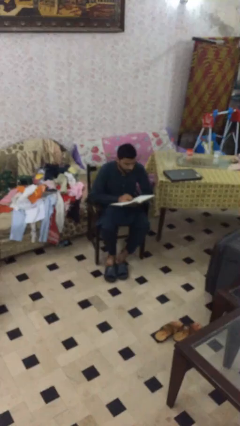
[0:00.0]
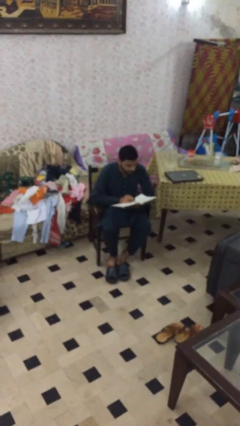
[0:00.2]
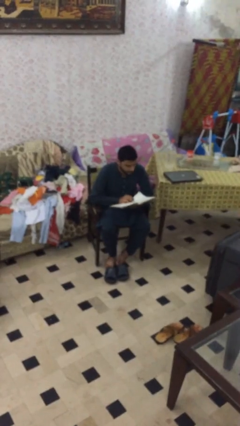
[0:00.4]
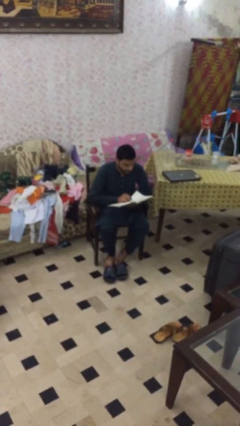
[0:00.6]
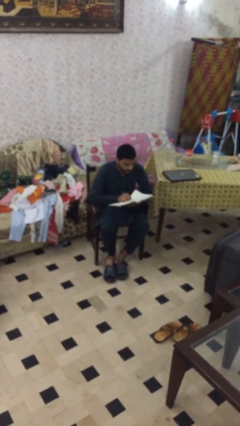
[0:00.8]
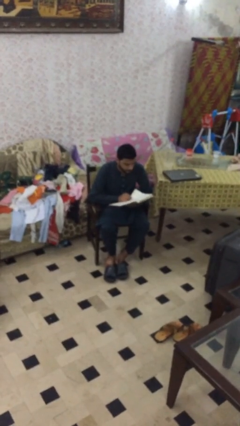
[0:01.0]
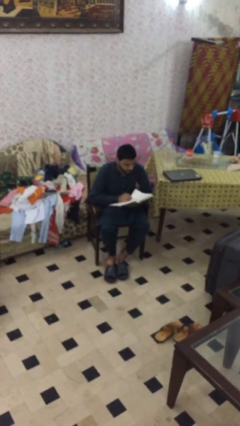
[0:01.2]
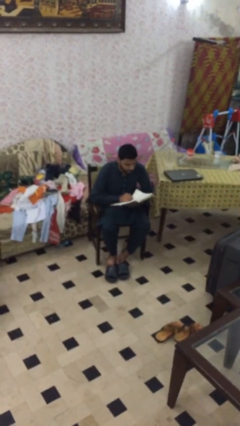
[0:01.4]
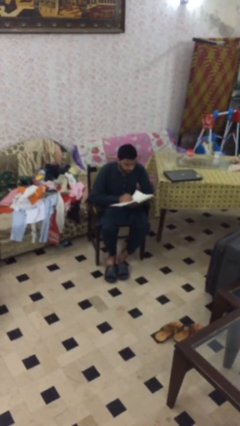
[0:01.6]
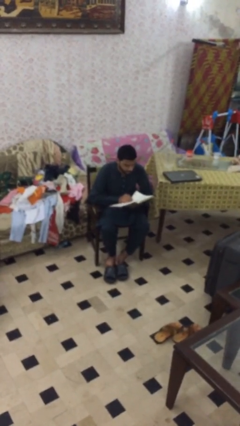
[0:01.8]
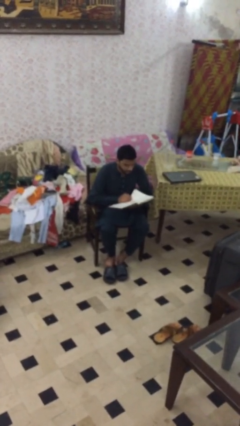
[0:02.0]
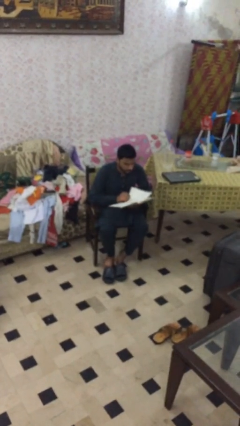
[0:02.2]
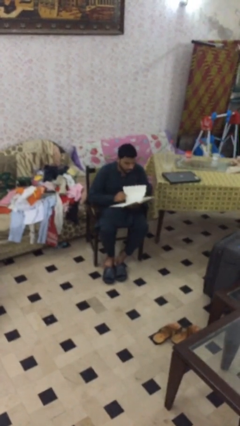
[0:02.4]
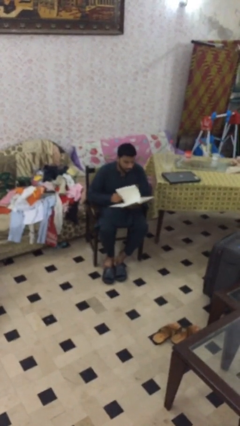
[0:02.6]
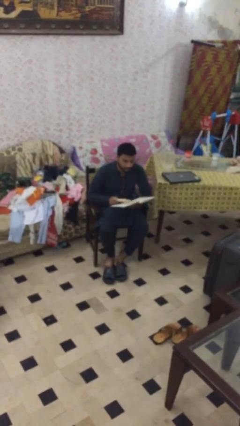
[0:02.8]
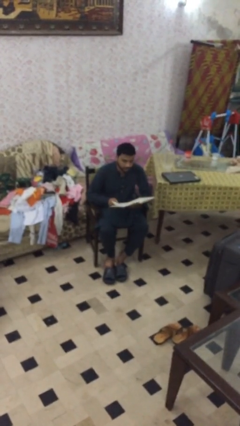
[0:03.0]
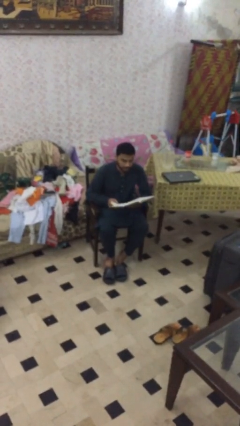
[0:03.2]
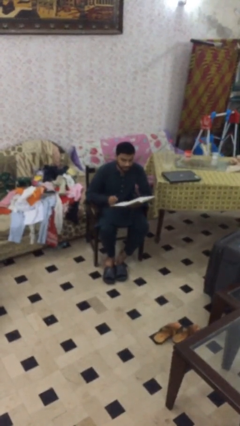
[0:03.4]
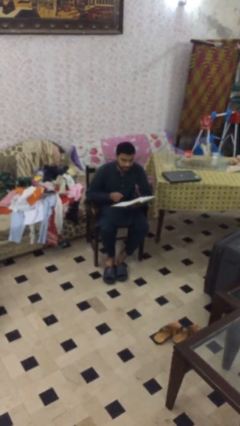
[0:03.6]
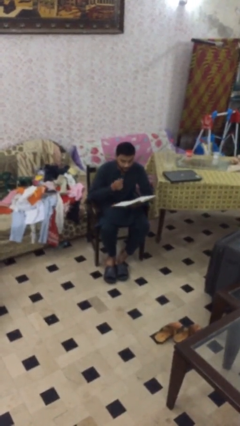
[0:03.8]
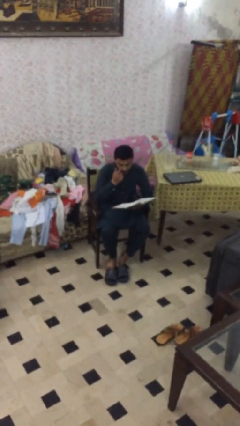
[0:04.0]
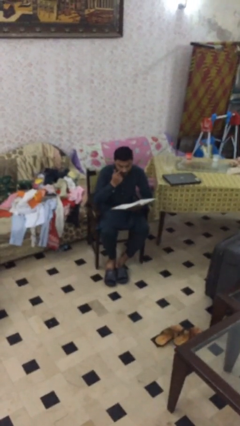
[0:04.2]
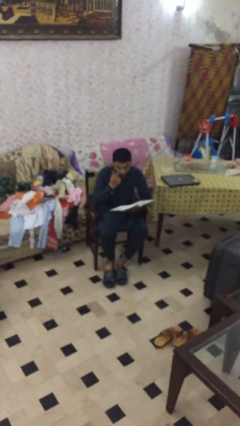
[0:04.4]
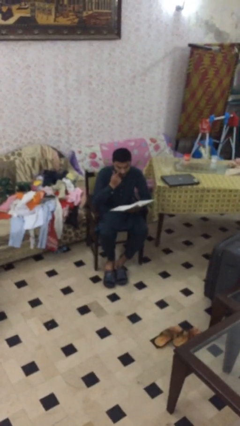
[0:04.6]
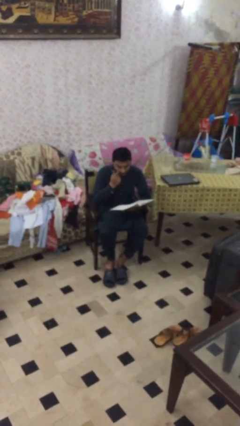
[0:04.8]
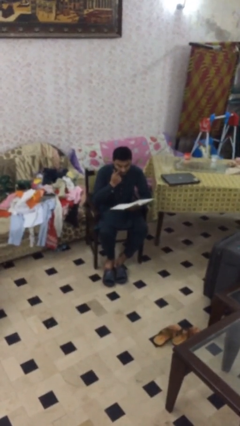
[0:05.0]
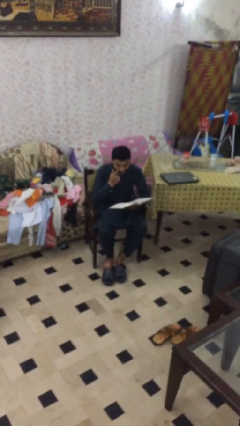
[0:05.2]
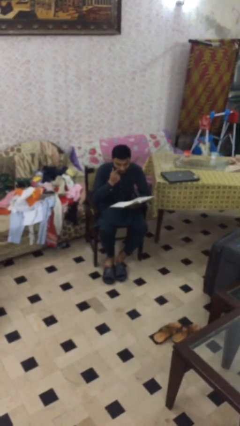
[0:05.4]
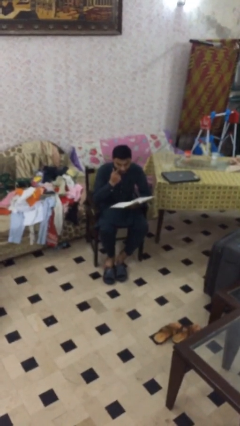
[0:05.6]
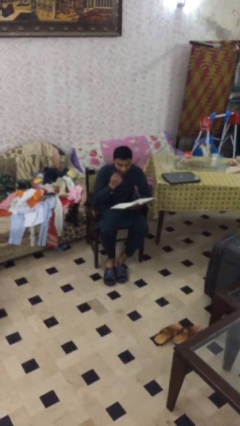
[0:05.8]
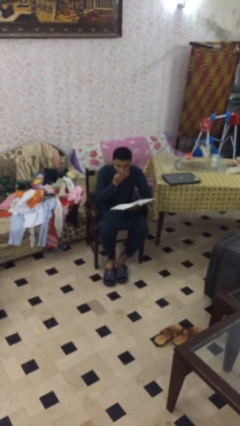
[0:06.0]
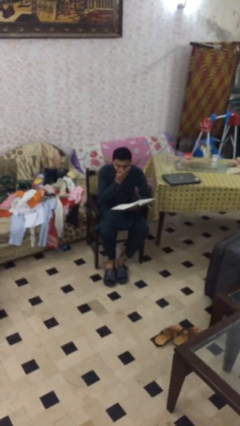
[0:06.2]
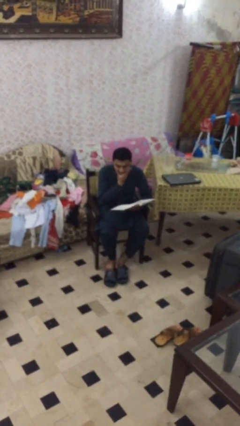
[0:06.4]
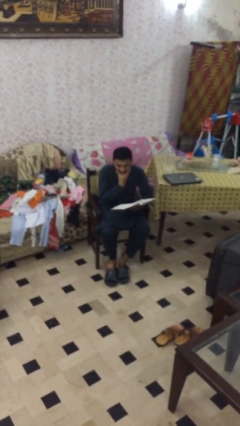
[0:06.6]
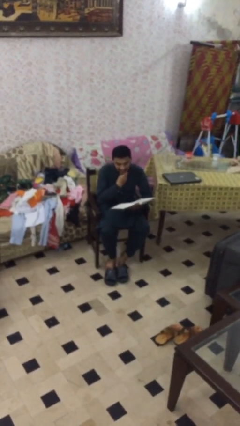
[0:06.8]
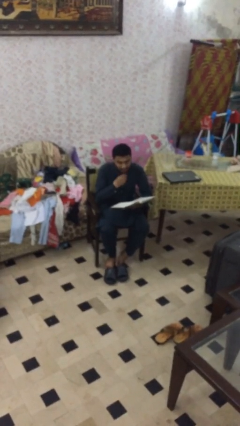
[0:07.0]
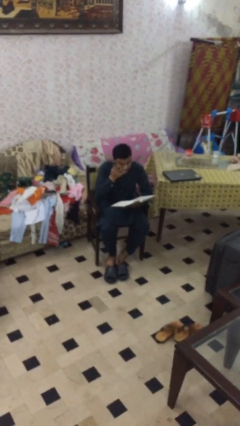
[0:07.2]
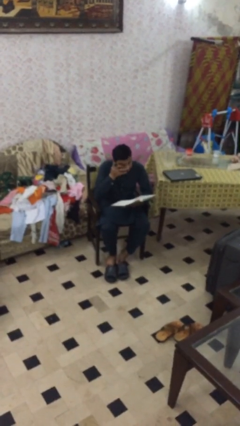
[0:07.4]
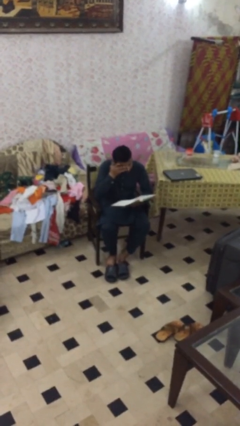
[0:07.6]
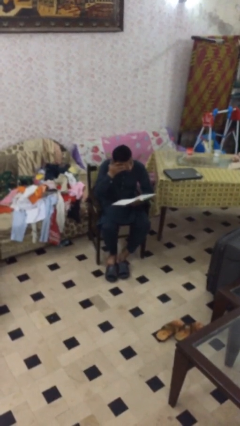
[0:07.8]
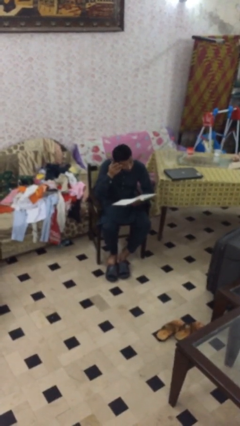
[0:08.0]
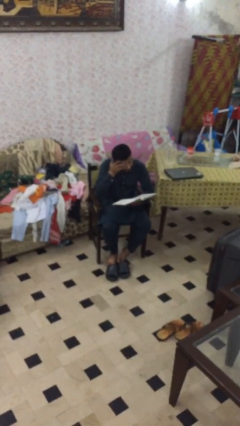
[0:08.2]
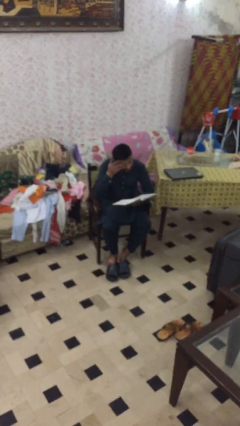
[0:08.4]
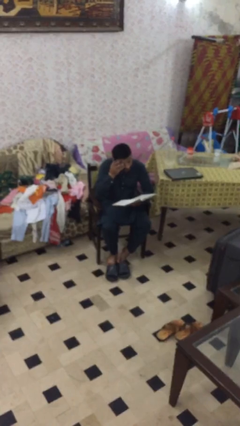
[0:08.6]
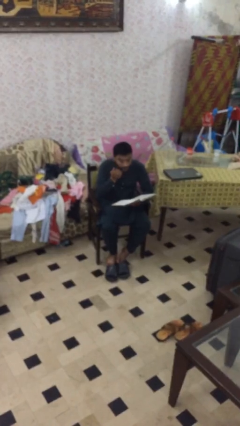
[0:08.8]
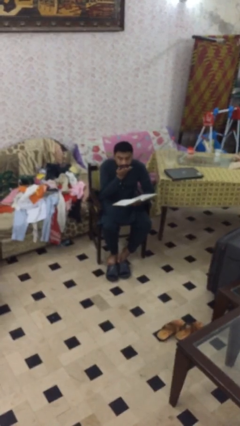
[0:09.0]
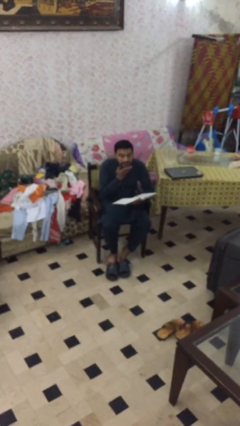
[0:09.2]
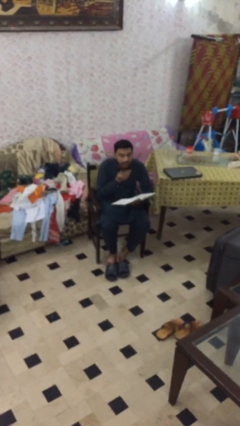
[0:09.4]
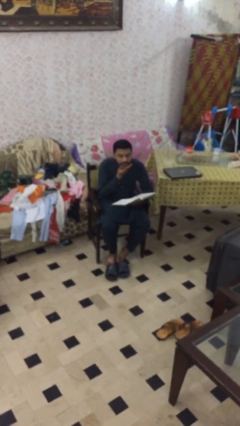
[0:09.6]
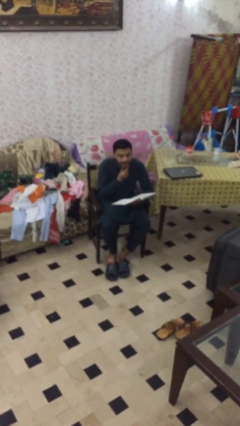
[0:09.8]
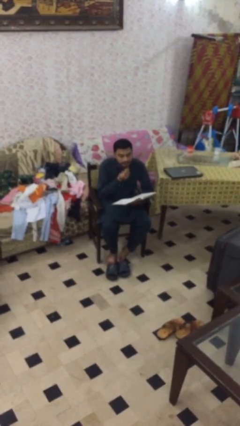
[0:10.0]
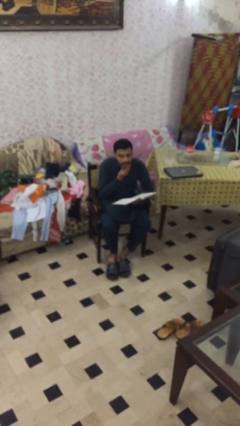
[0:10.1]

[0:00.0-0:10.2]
person reads document

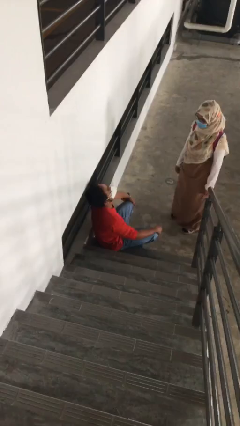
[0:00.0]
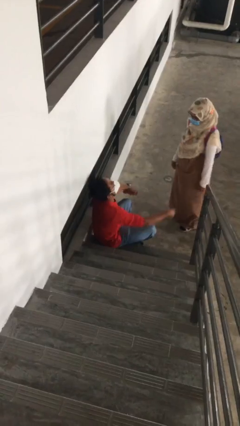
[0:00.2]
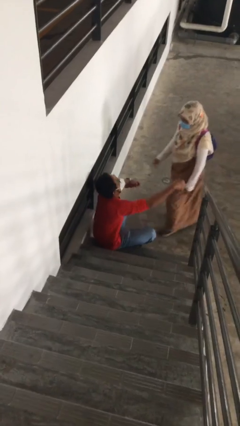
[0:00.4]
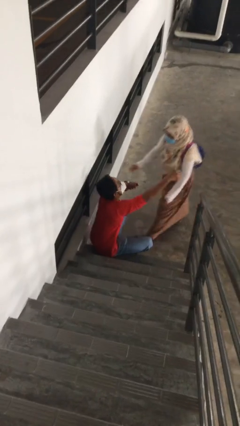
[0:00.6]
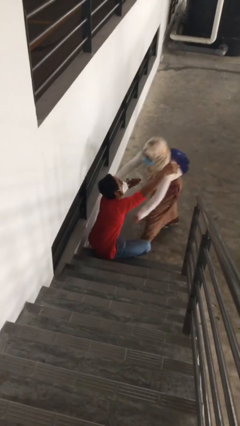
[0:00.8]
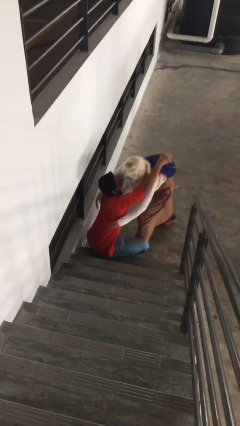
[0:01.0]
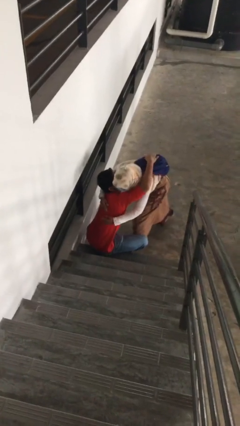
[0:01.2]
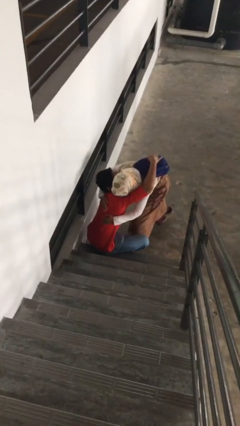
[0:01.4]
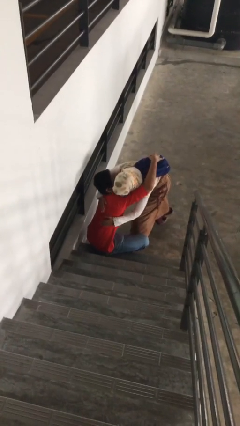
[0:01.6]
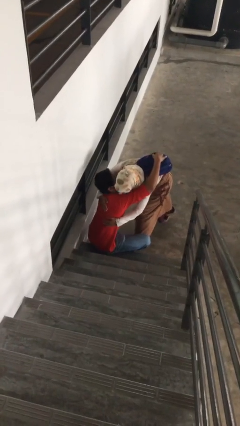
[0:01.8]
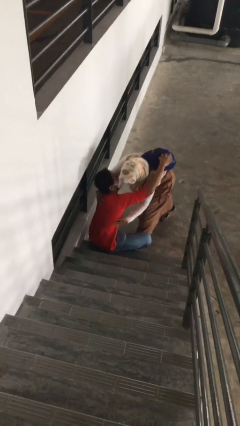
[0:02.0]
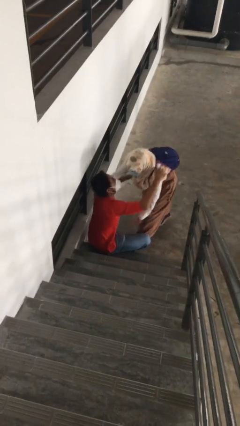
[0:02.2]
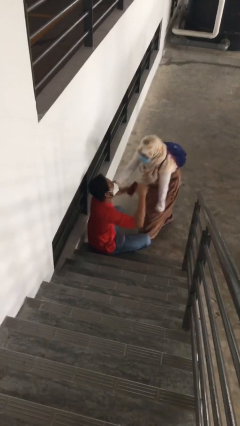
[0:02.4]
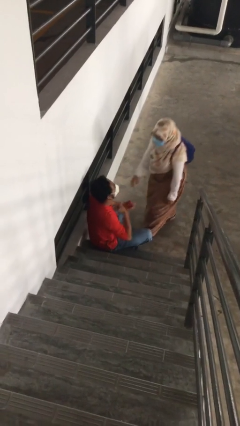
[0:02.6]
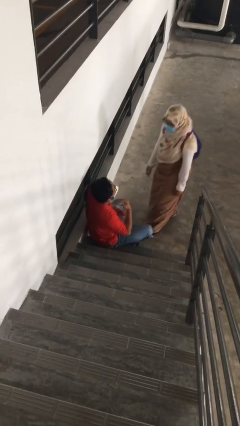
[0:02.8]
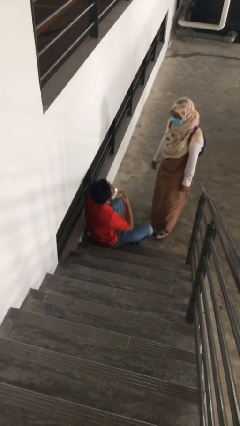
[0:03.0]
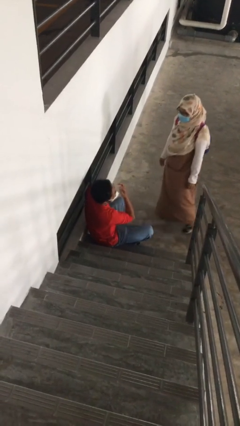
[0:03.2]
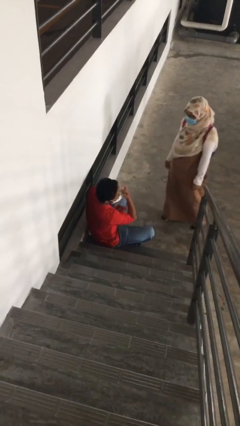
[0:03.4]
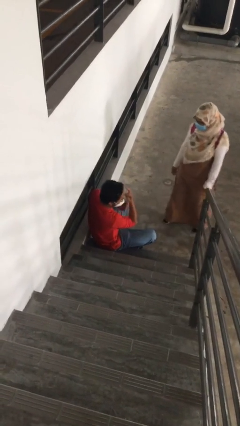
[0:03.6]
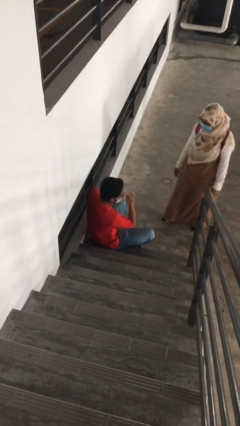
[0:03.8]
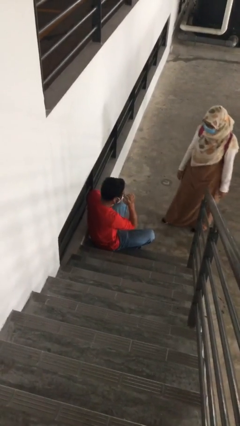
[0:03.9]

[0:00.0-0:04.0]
person embraces person

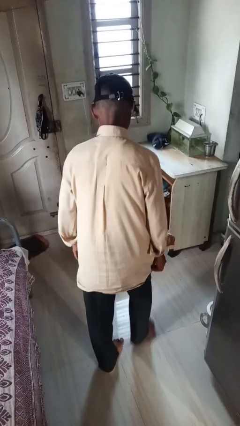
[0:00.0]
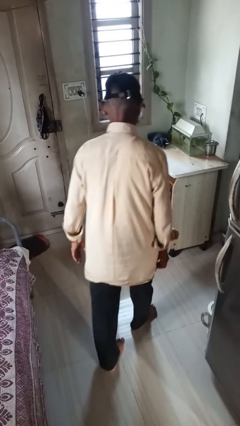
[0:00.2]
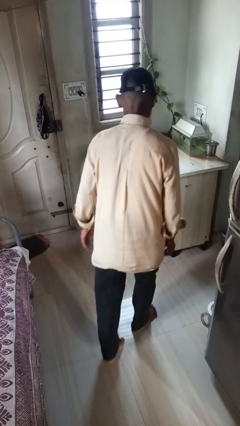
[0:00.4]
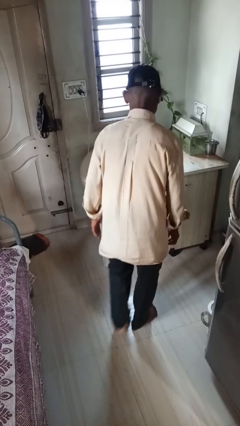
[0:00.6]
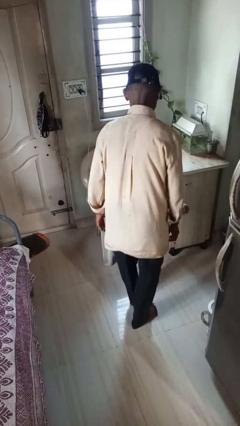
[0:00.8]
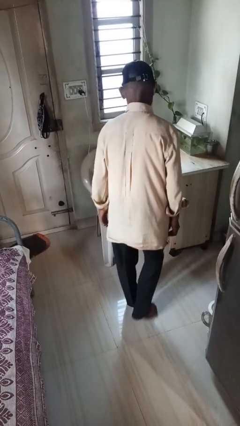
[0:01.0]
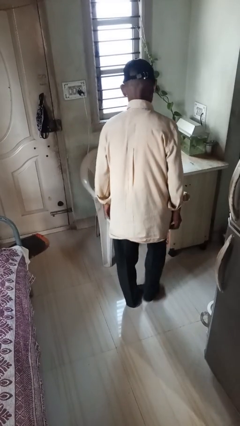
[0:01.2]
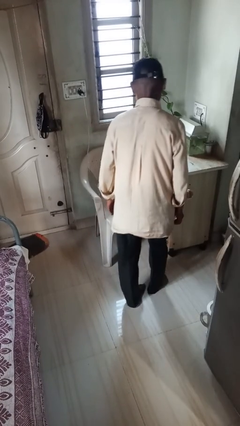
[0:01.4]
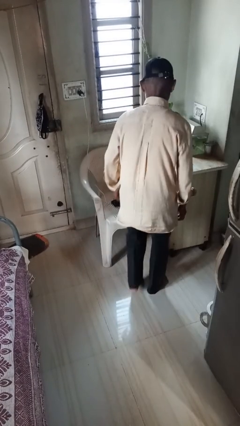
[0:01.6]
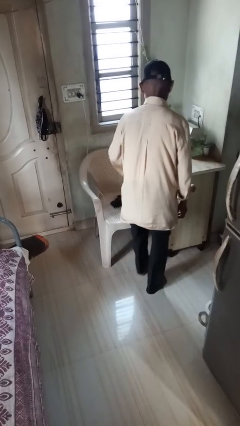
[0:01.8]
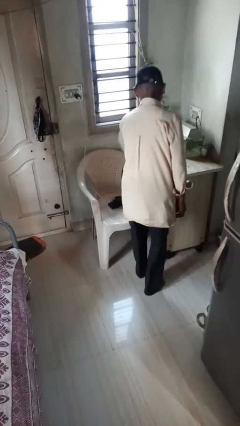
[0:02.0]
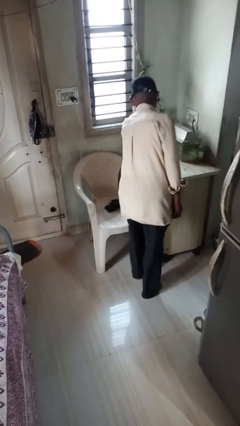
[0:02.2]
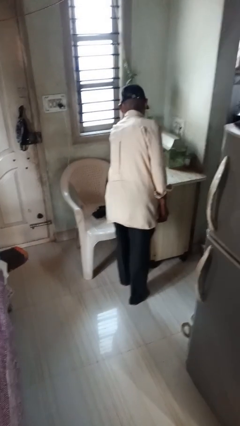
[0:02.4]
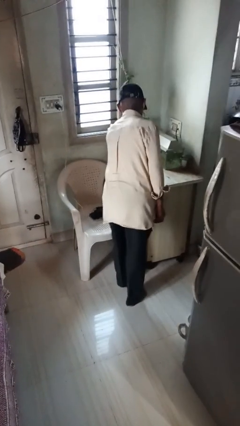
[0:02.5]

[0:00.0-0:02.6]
person picks up object from table

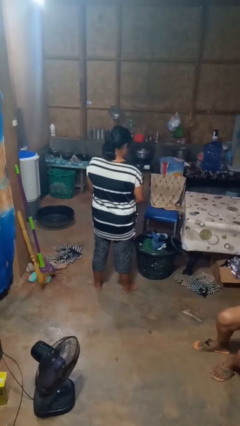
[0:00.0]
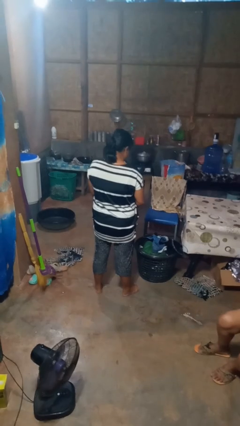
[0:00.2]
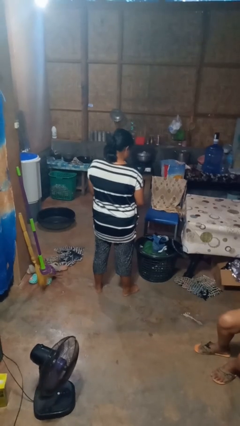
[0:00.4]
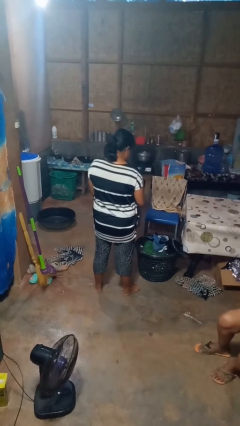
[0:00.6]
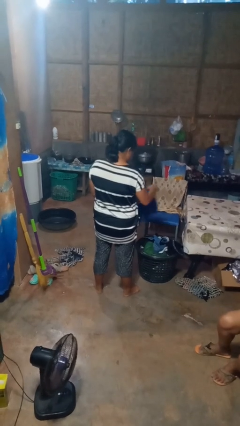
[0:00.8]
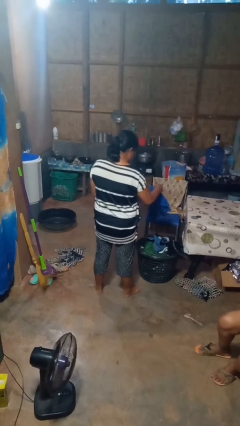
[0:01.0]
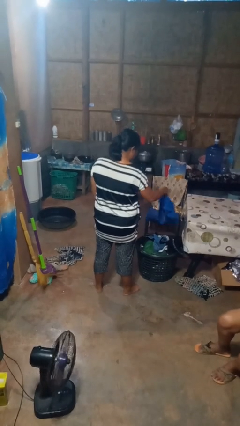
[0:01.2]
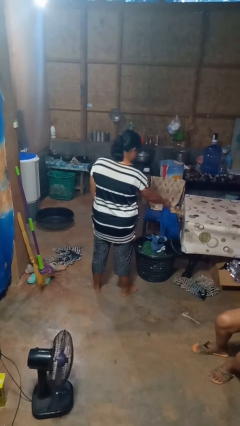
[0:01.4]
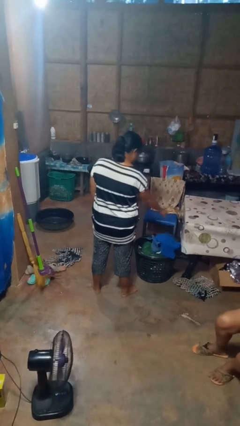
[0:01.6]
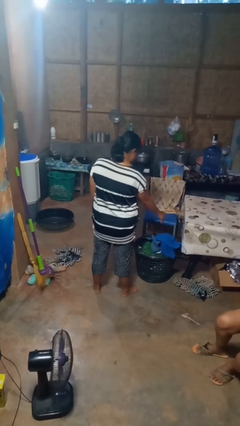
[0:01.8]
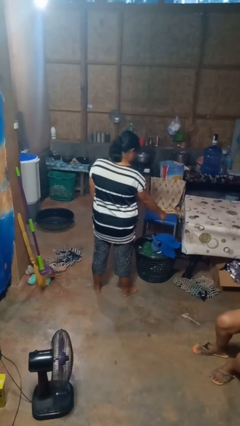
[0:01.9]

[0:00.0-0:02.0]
person puts object into basket
